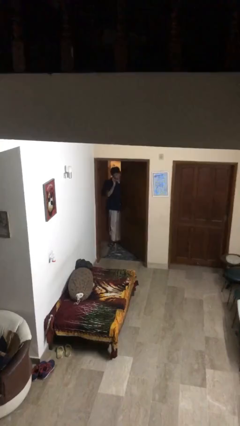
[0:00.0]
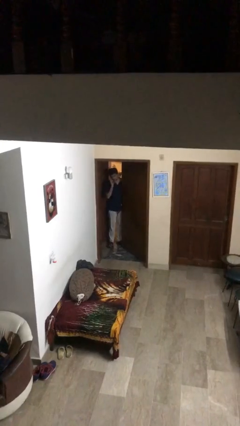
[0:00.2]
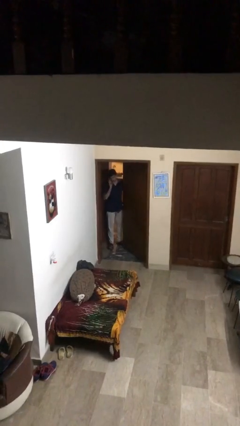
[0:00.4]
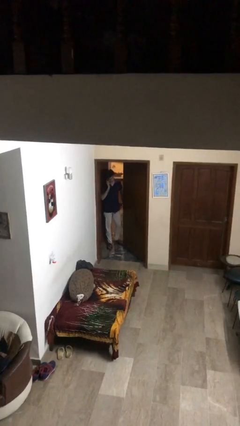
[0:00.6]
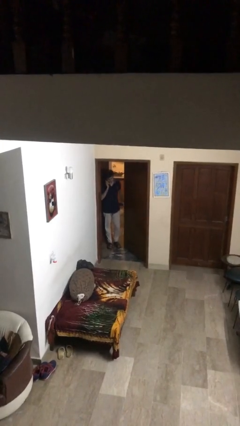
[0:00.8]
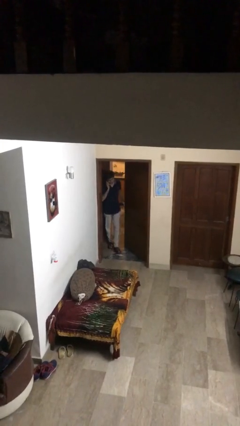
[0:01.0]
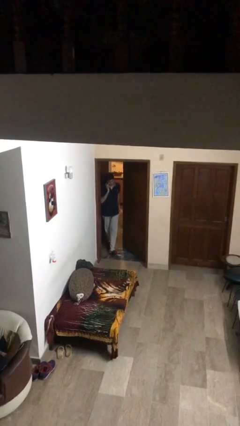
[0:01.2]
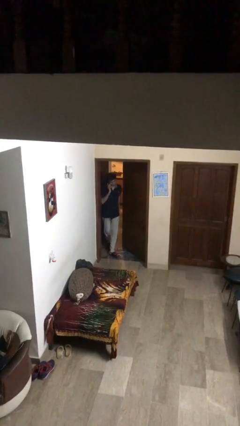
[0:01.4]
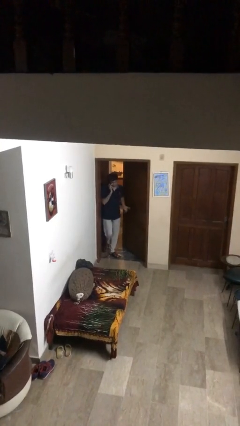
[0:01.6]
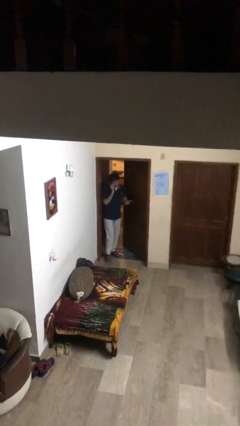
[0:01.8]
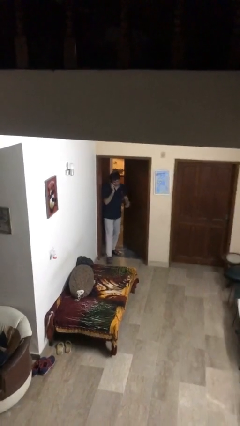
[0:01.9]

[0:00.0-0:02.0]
person enters scene through structure

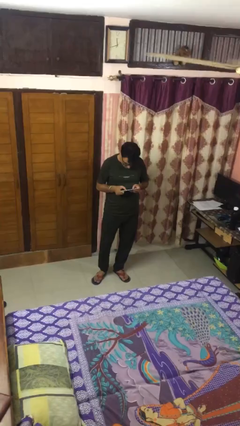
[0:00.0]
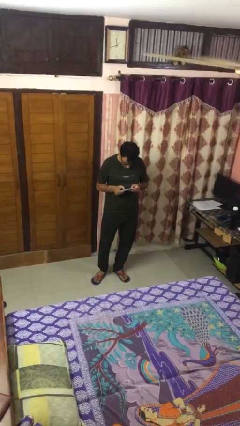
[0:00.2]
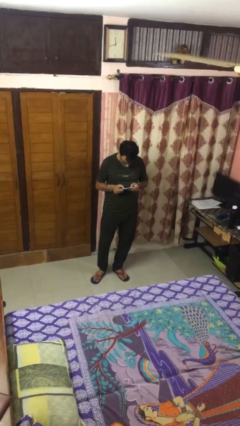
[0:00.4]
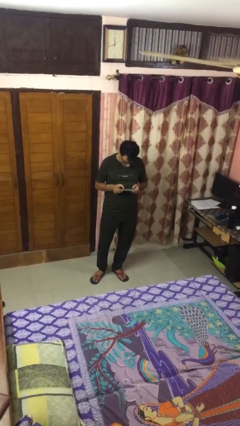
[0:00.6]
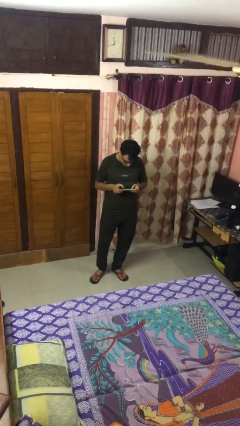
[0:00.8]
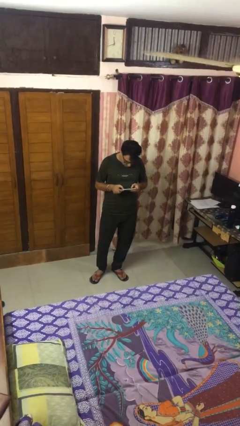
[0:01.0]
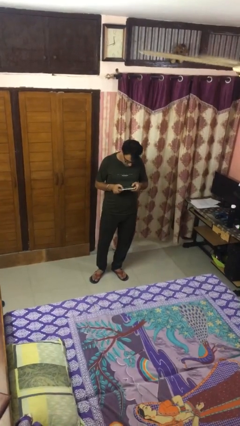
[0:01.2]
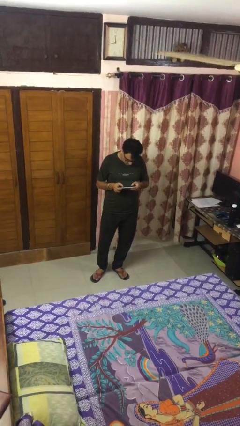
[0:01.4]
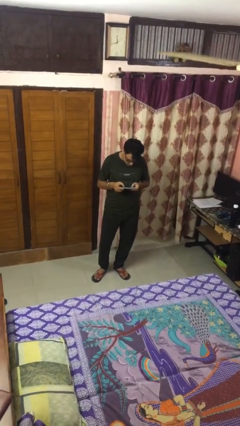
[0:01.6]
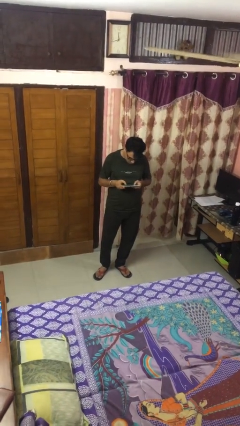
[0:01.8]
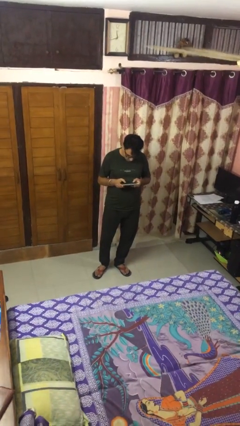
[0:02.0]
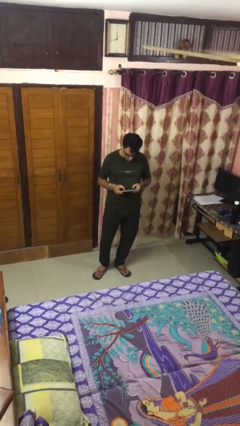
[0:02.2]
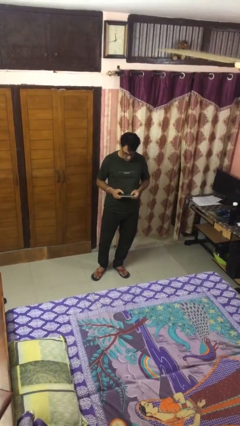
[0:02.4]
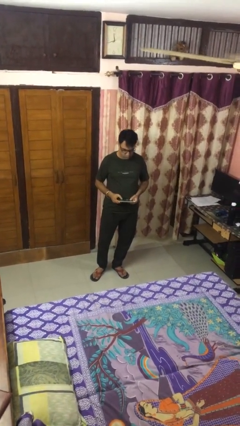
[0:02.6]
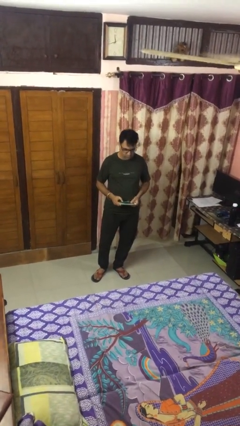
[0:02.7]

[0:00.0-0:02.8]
person interacts with handheld game

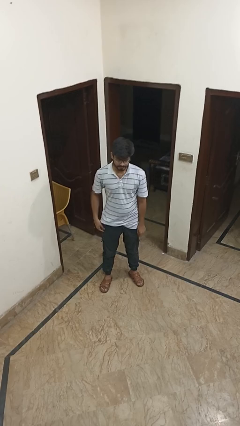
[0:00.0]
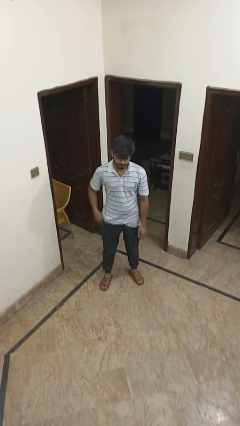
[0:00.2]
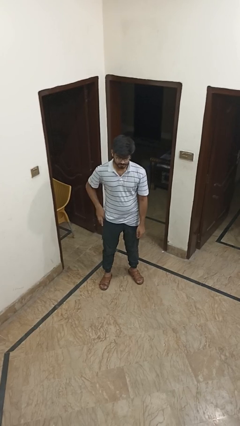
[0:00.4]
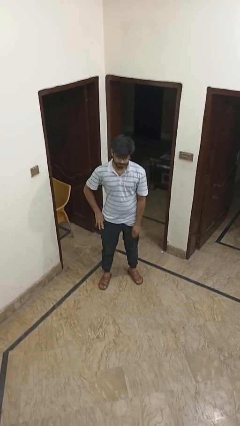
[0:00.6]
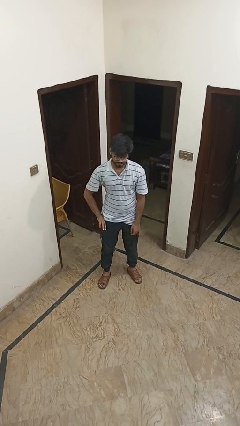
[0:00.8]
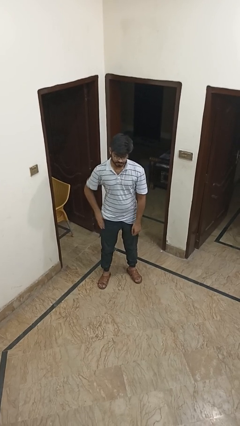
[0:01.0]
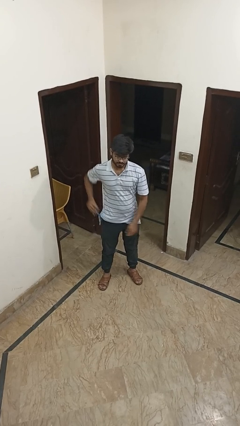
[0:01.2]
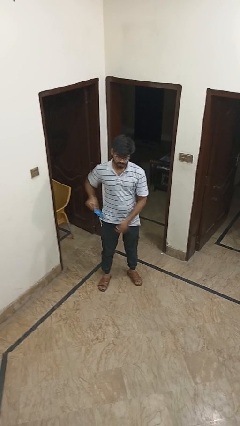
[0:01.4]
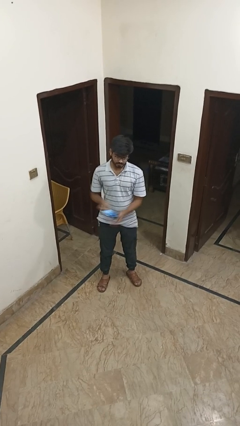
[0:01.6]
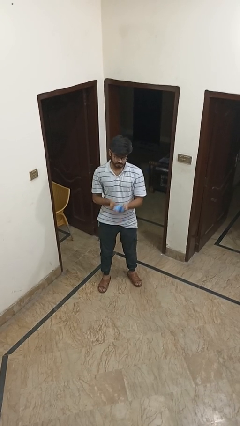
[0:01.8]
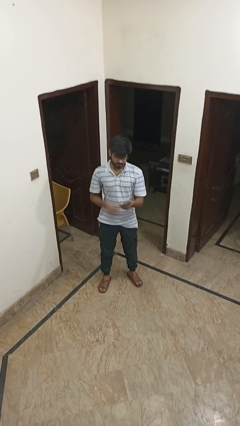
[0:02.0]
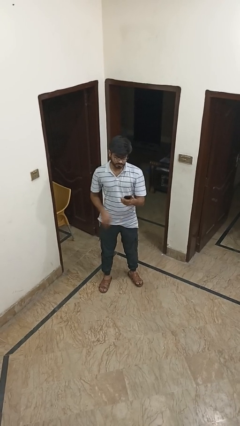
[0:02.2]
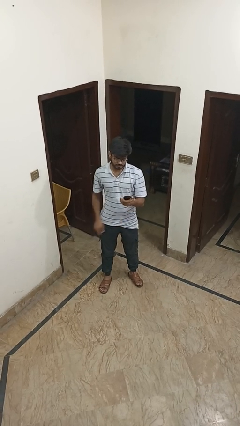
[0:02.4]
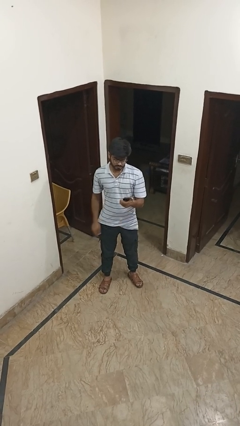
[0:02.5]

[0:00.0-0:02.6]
person takes phone from pocket

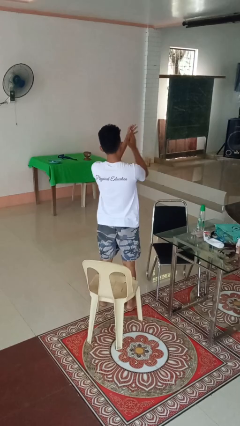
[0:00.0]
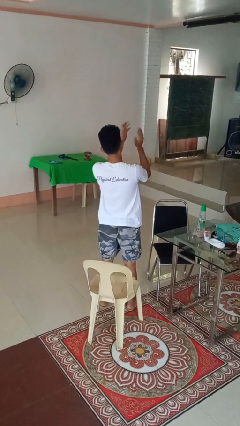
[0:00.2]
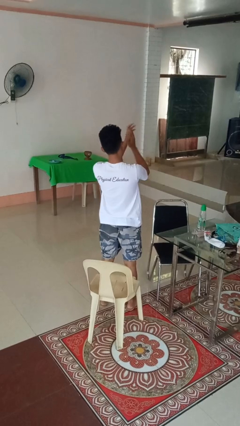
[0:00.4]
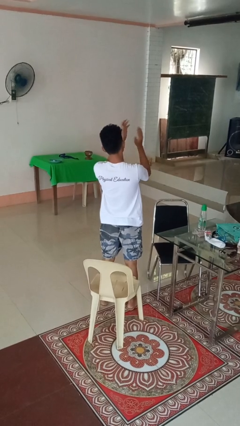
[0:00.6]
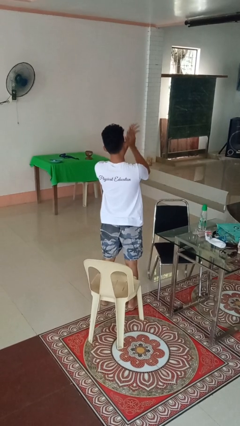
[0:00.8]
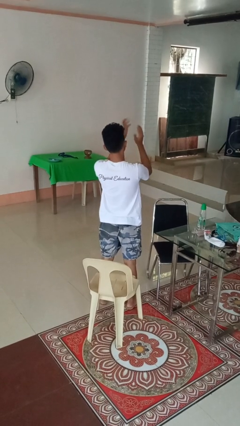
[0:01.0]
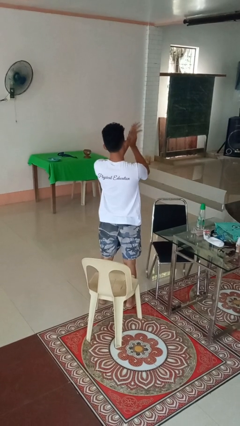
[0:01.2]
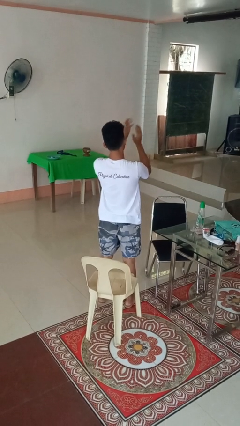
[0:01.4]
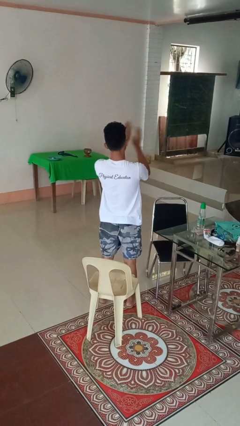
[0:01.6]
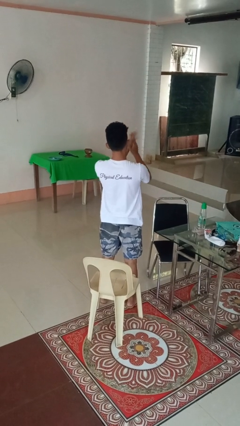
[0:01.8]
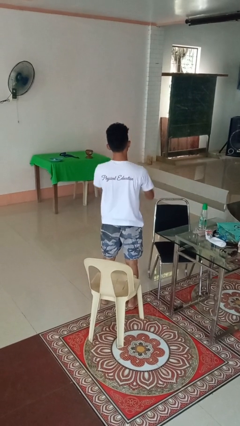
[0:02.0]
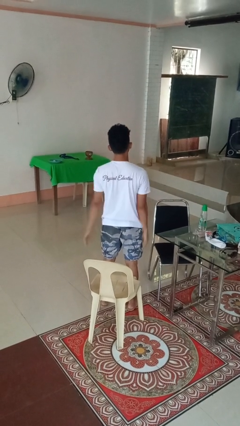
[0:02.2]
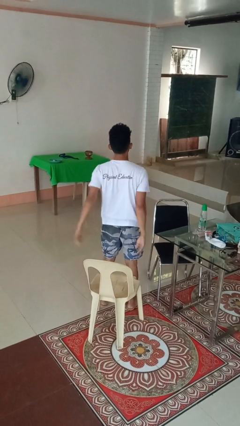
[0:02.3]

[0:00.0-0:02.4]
person claps hands

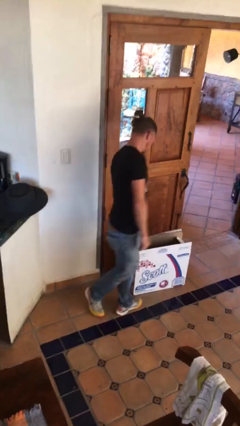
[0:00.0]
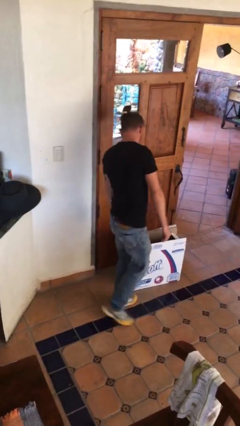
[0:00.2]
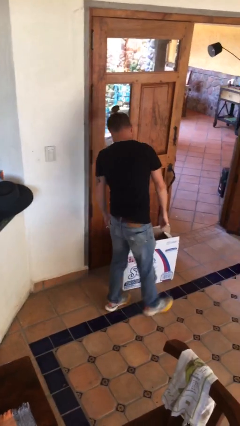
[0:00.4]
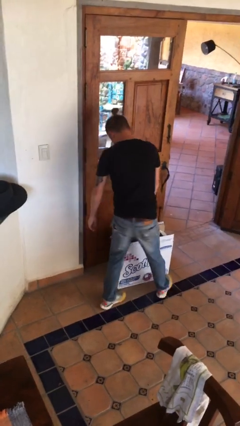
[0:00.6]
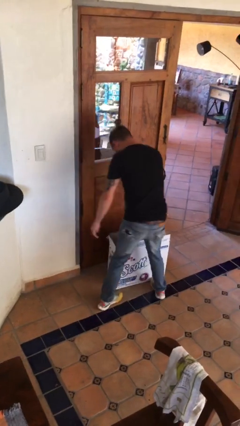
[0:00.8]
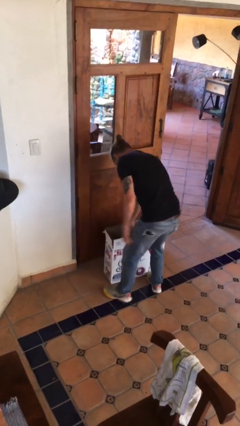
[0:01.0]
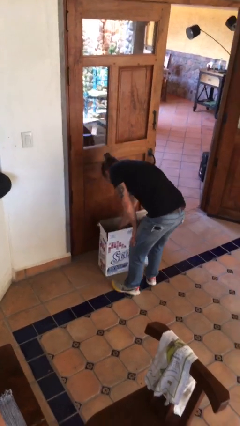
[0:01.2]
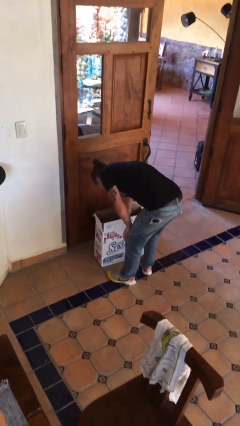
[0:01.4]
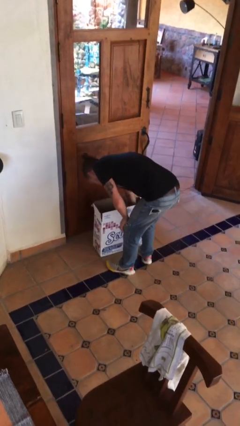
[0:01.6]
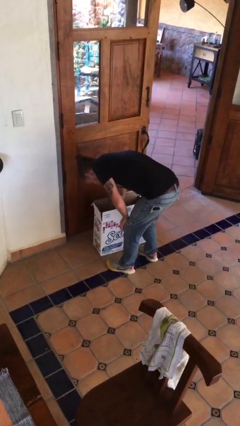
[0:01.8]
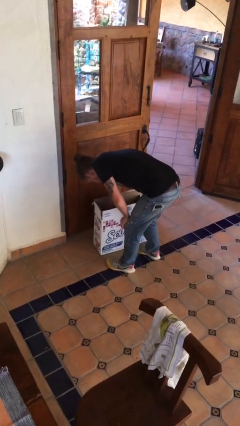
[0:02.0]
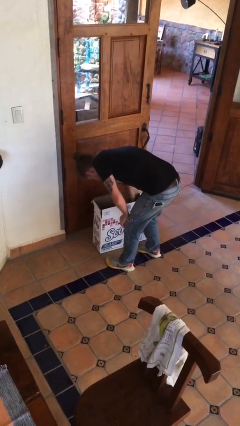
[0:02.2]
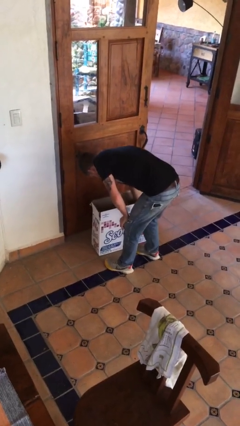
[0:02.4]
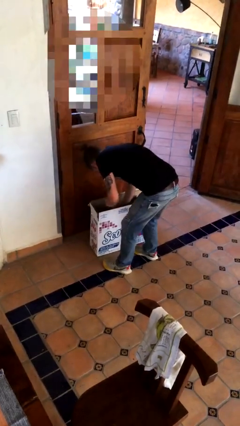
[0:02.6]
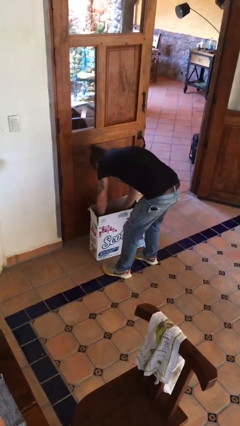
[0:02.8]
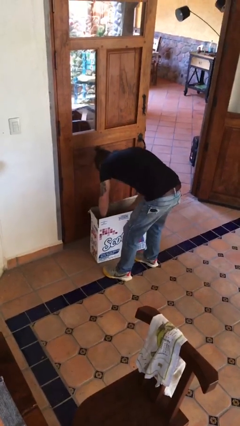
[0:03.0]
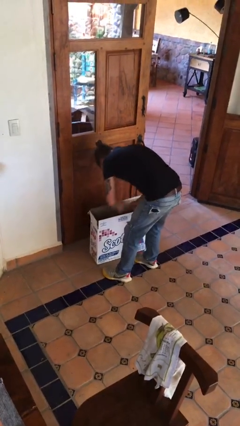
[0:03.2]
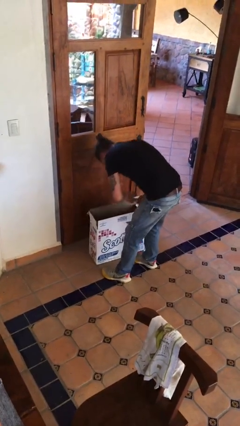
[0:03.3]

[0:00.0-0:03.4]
person searches in box

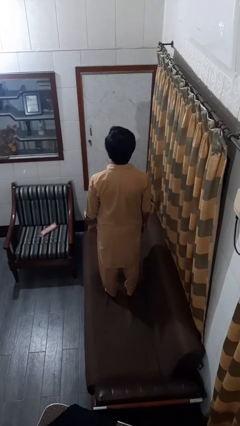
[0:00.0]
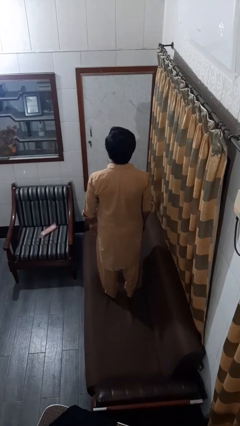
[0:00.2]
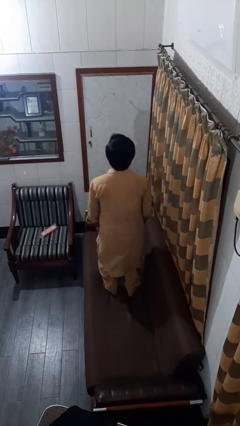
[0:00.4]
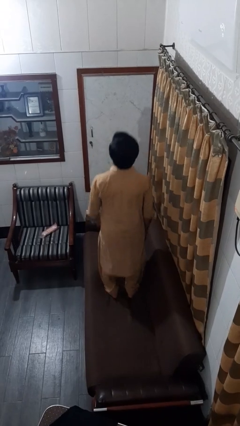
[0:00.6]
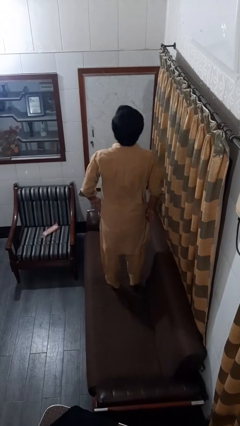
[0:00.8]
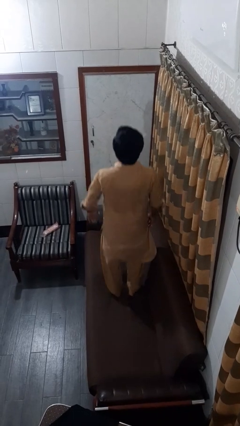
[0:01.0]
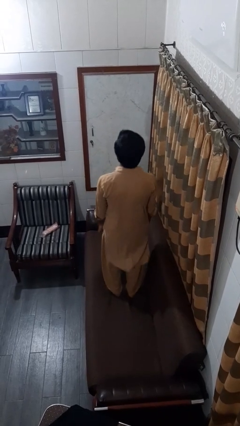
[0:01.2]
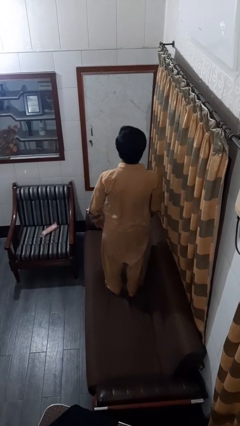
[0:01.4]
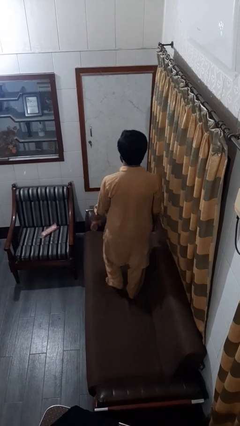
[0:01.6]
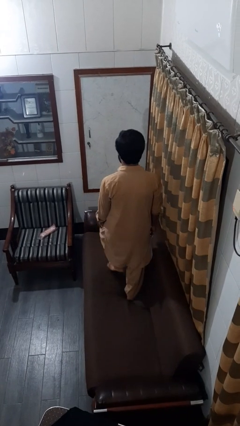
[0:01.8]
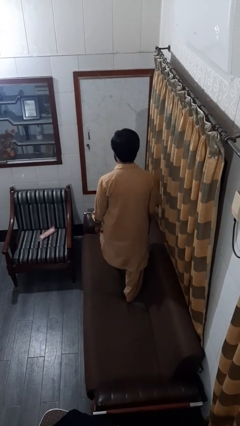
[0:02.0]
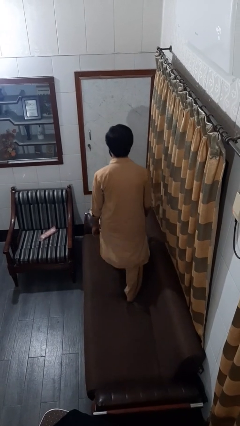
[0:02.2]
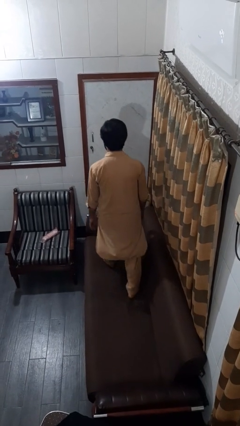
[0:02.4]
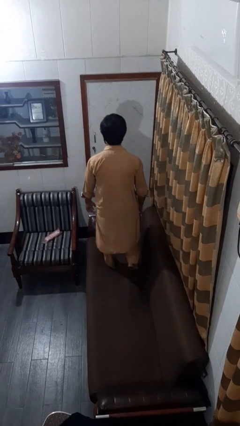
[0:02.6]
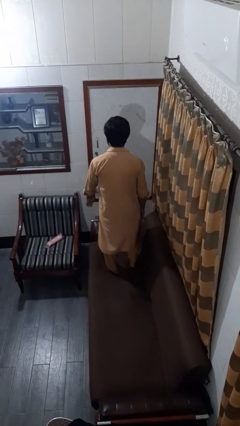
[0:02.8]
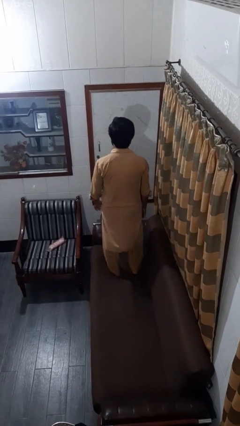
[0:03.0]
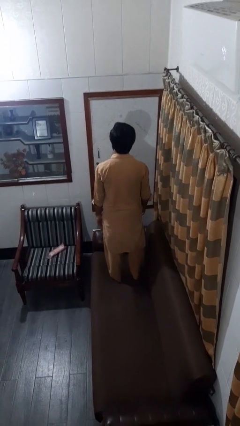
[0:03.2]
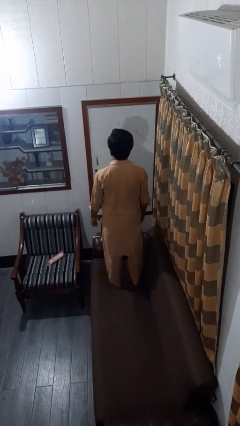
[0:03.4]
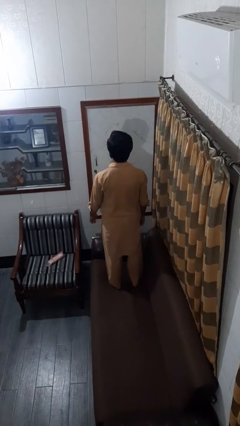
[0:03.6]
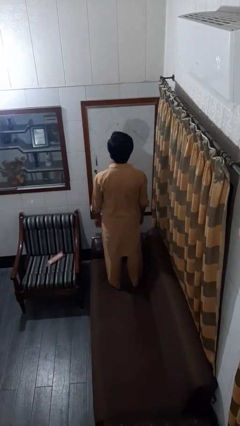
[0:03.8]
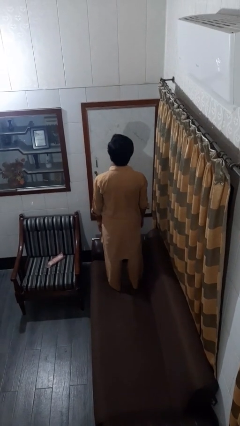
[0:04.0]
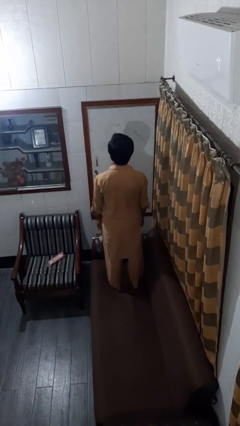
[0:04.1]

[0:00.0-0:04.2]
person jumps on couch
